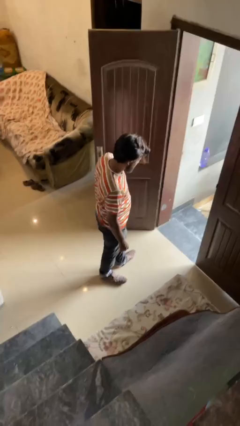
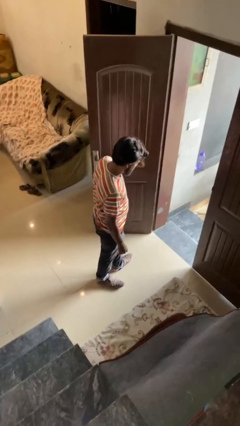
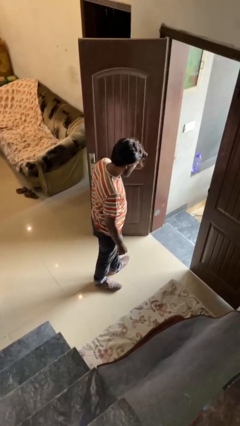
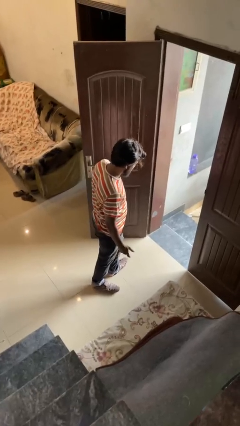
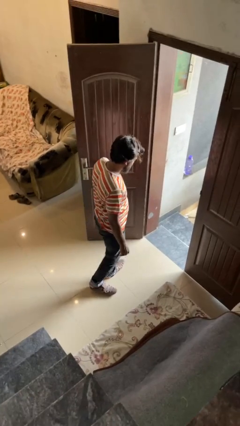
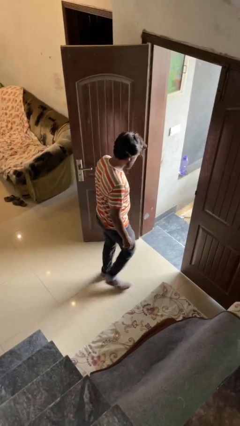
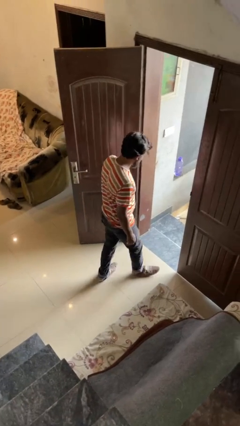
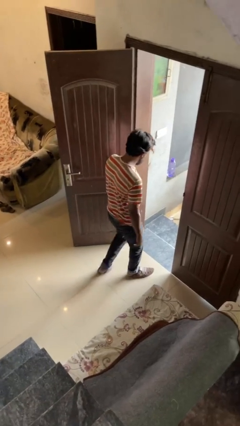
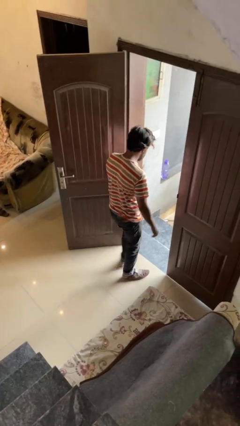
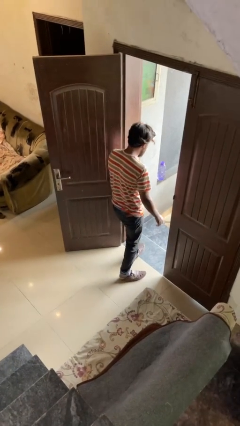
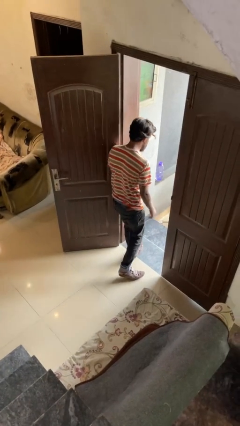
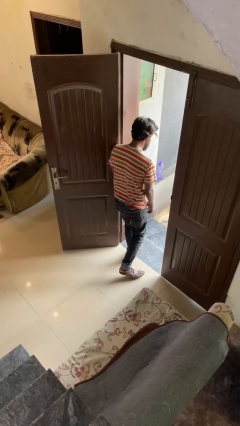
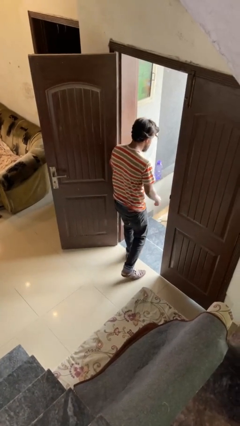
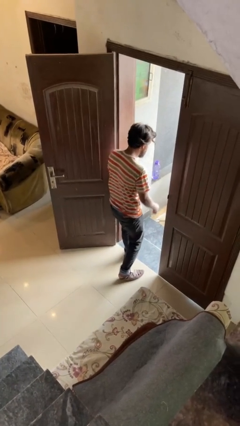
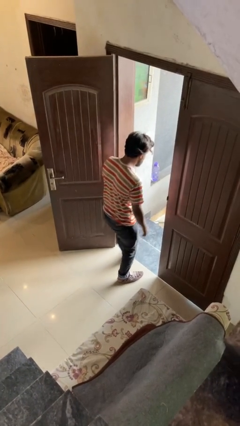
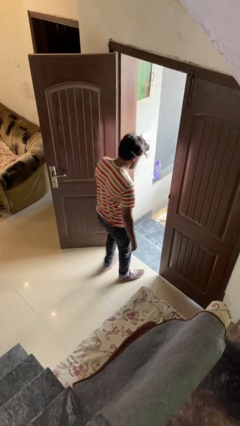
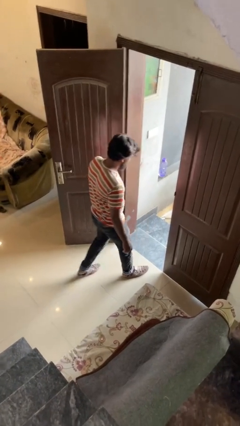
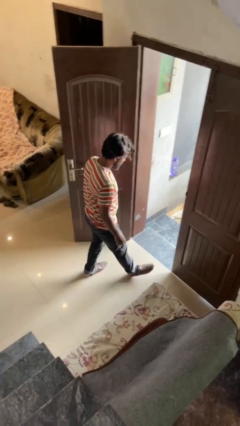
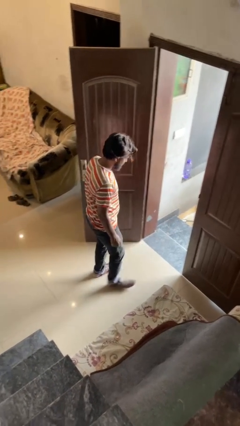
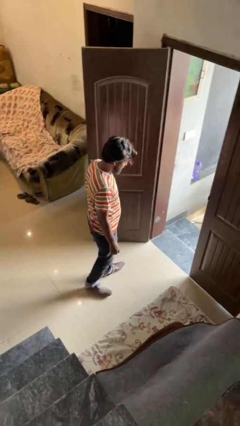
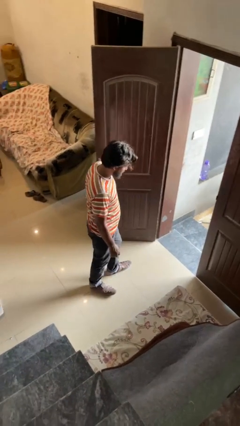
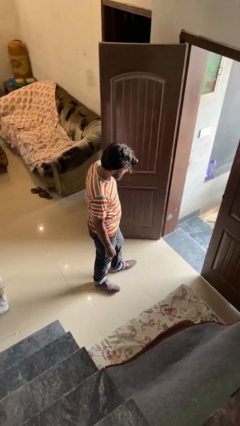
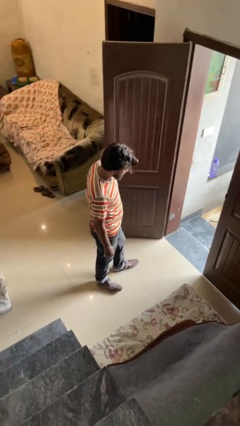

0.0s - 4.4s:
person bumps into wall

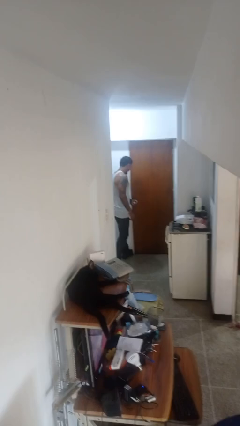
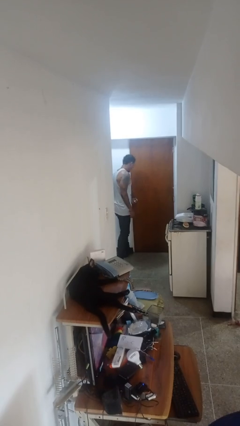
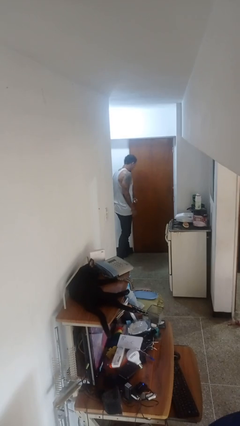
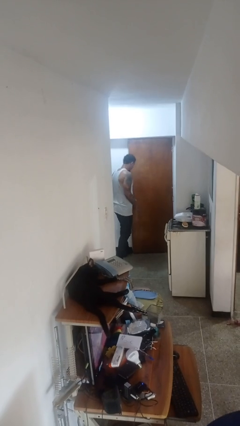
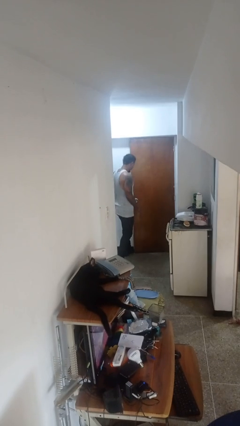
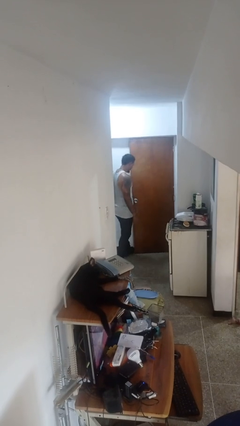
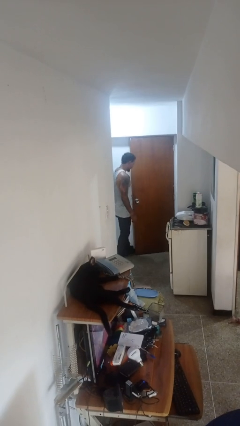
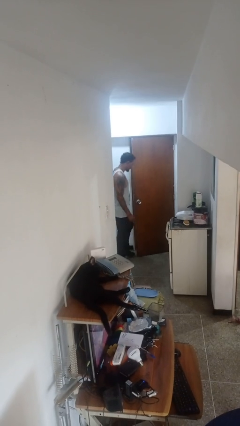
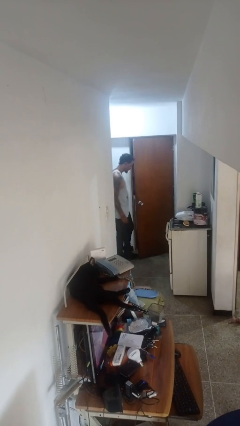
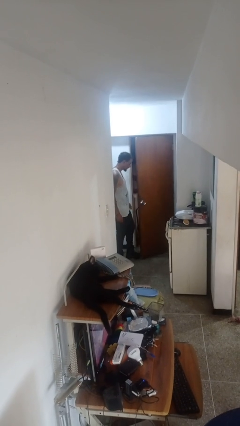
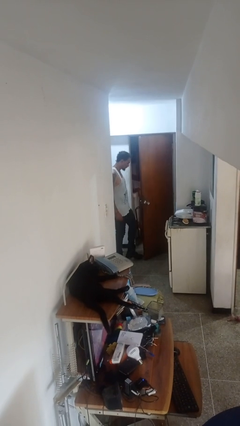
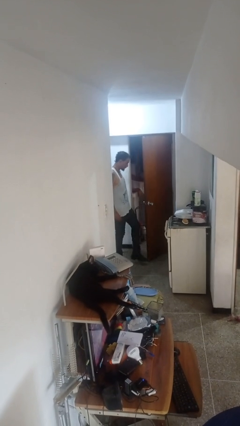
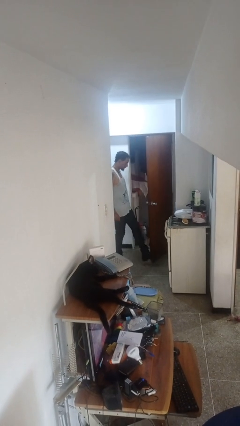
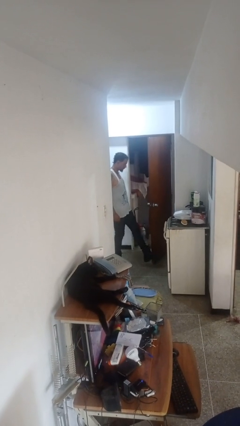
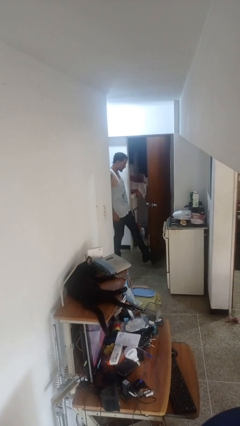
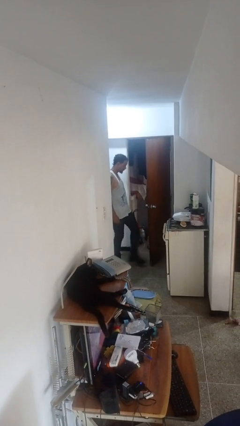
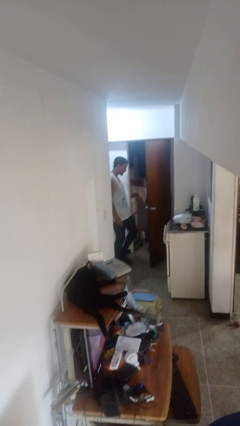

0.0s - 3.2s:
person opens facility door

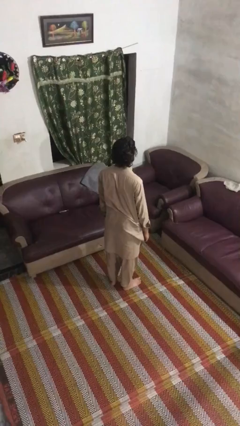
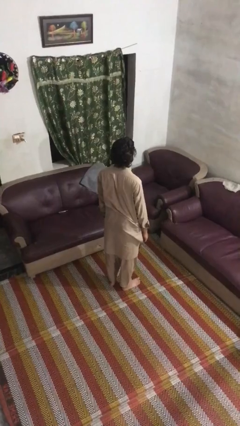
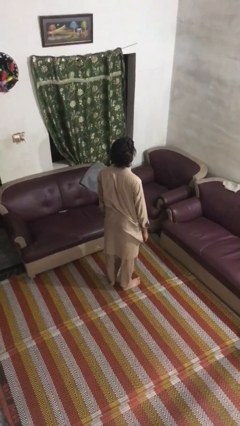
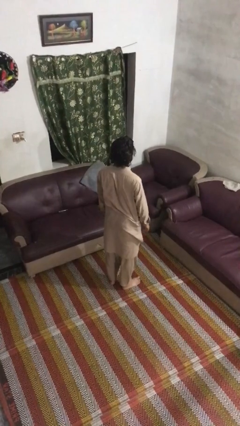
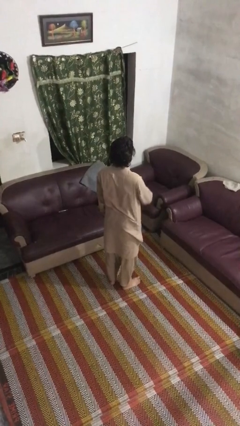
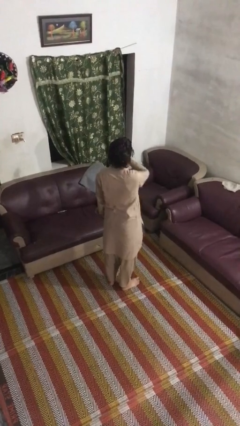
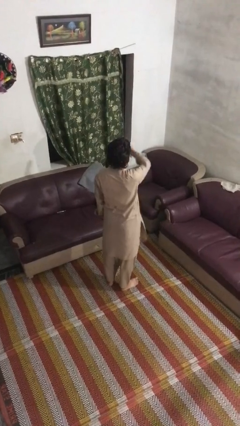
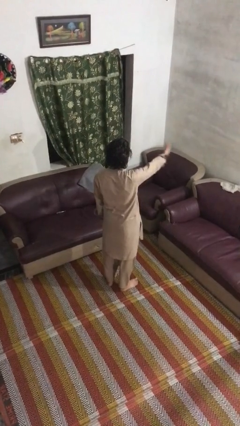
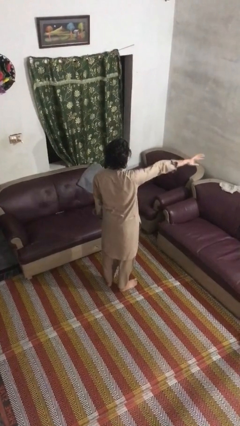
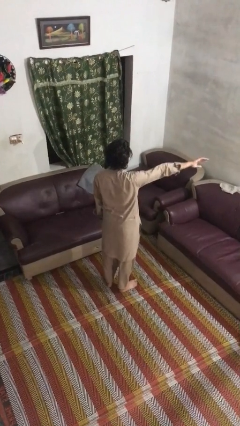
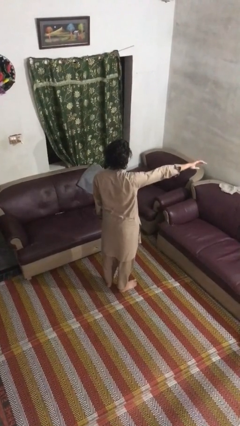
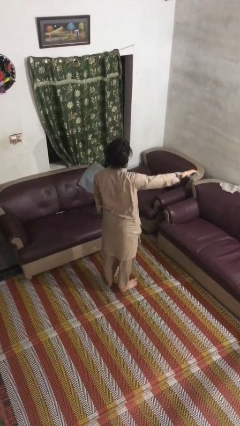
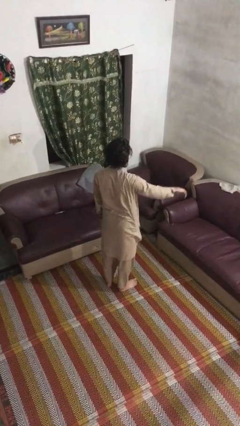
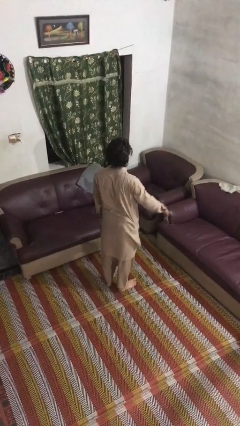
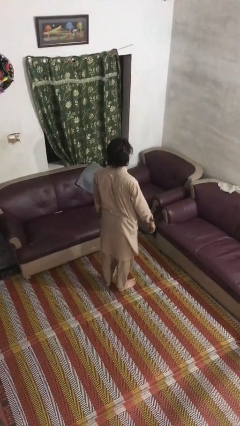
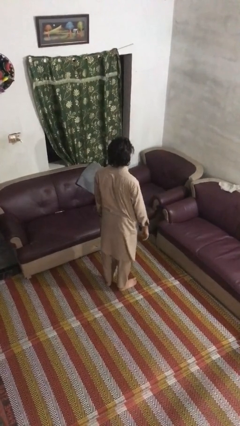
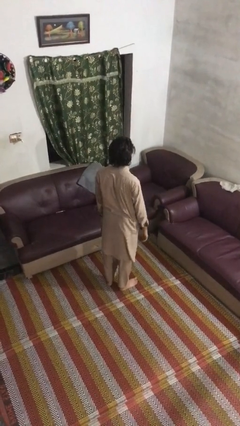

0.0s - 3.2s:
person gestures swipe right

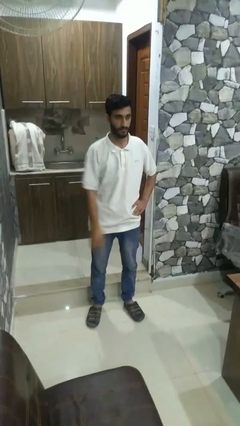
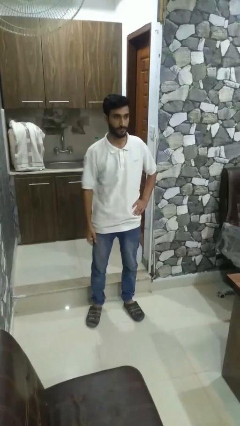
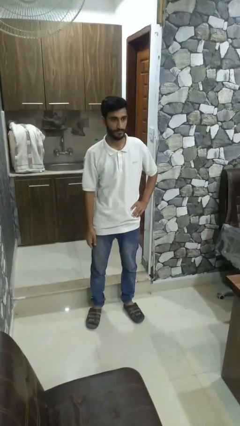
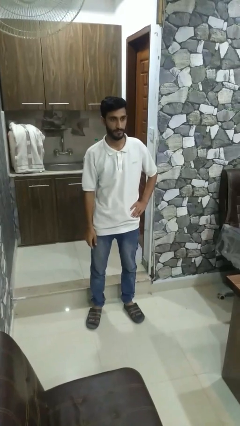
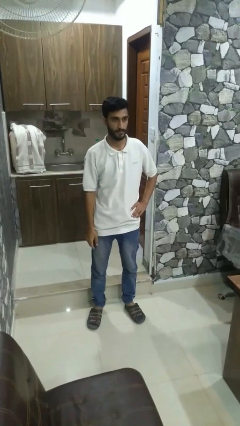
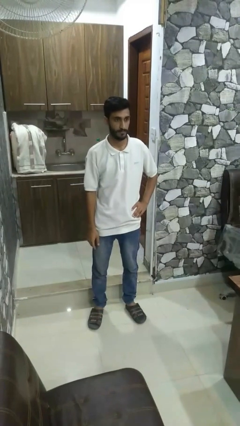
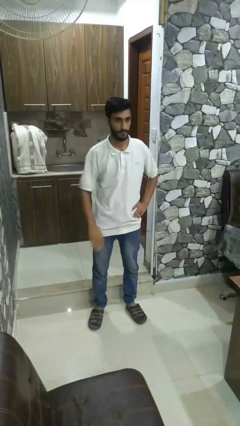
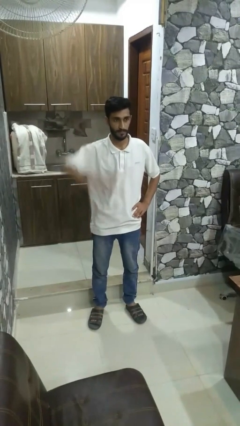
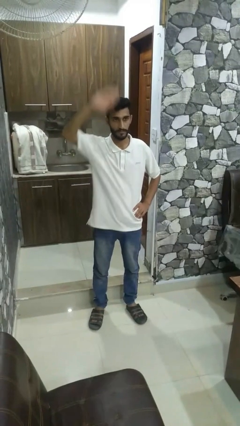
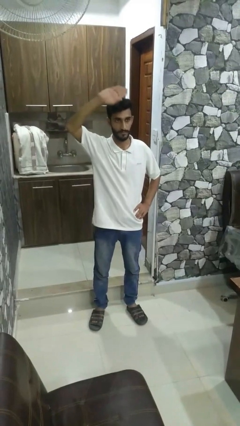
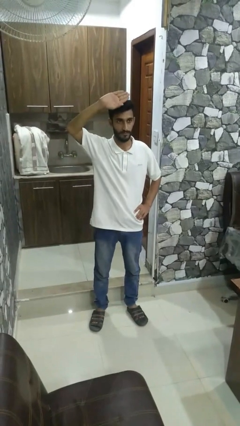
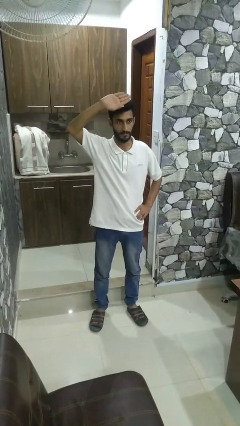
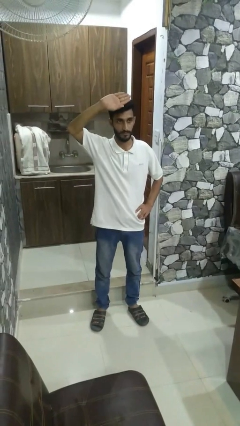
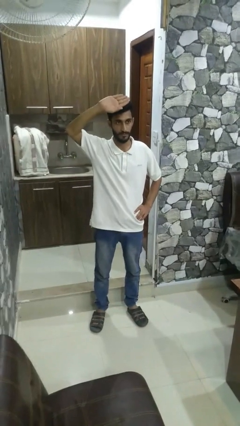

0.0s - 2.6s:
person gestures swipe up

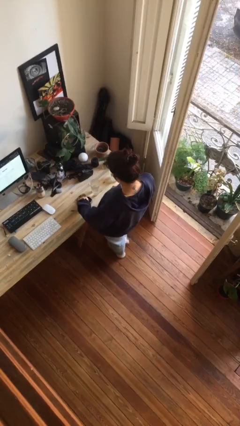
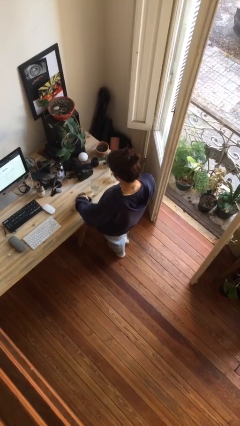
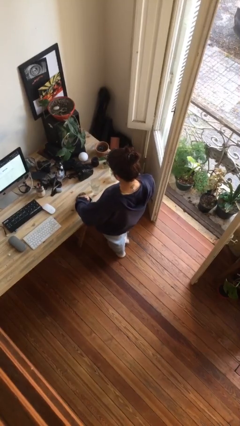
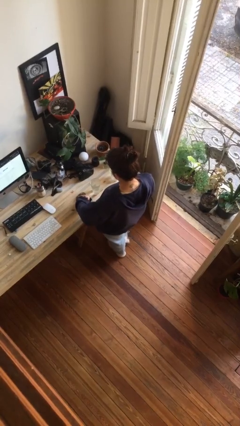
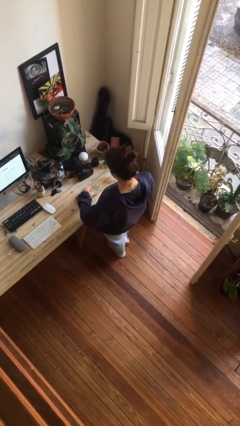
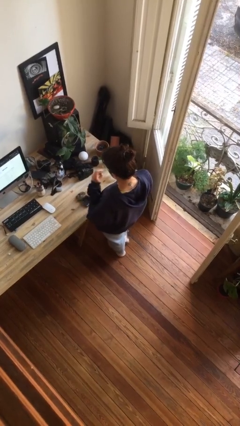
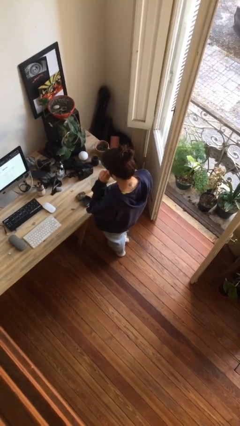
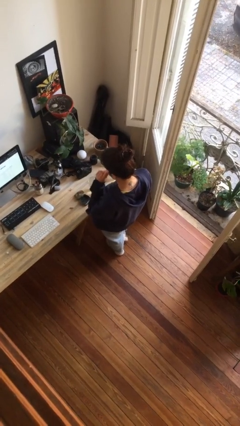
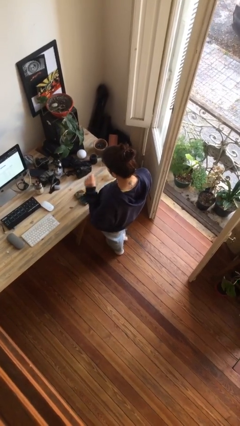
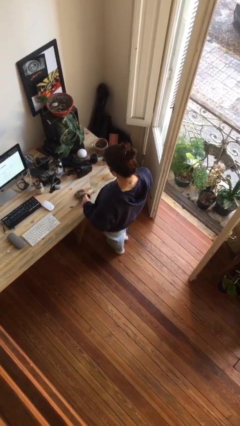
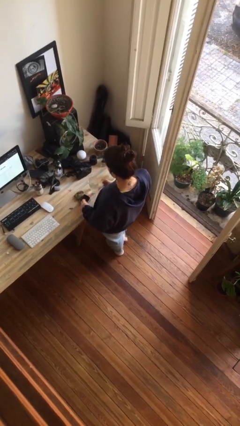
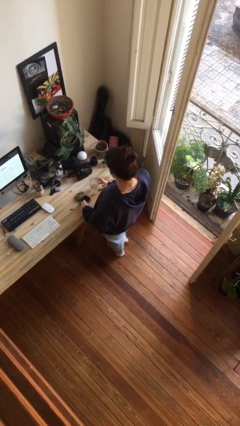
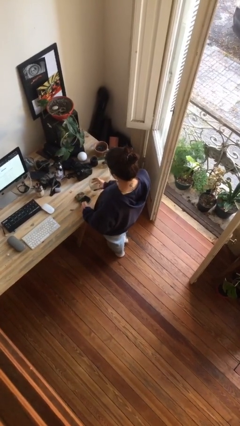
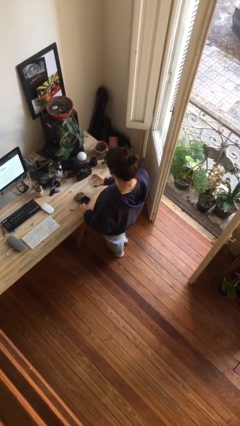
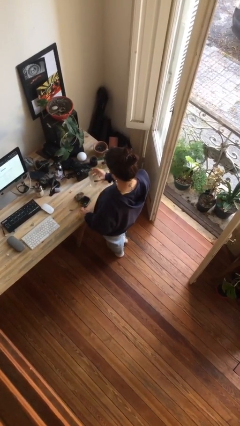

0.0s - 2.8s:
person takes medicine pills

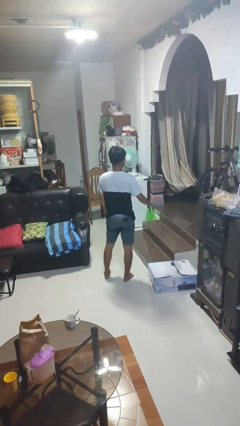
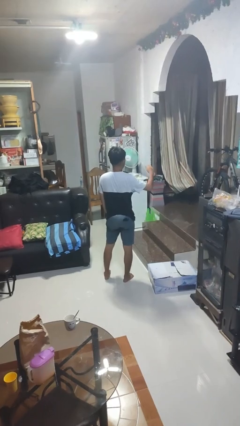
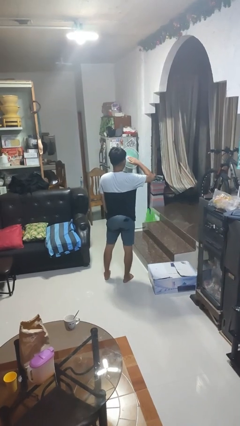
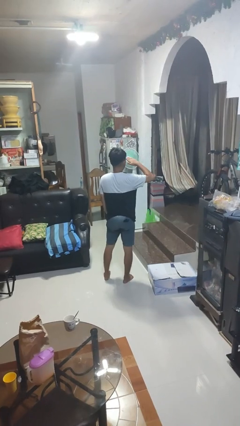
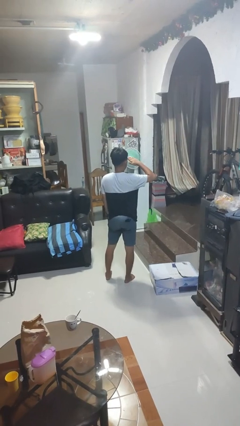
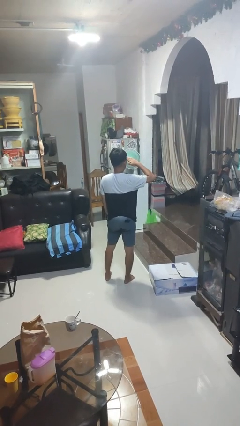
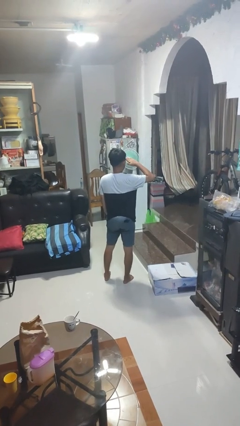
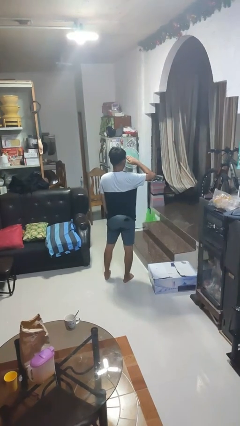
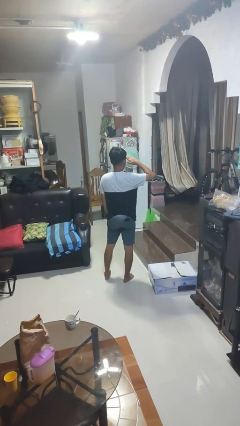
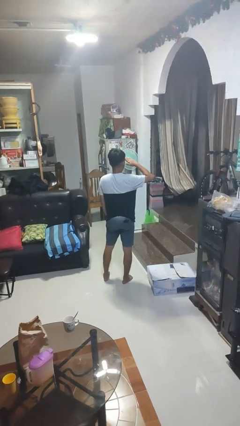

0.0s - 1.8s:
person salutes
